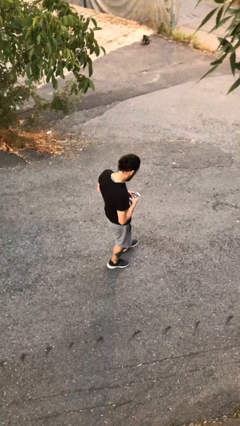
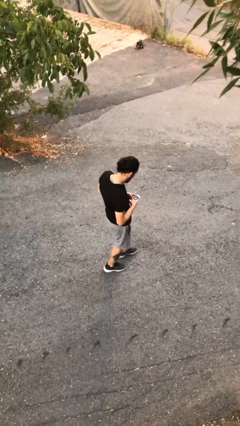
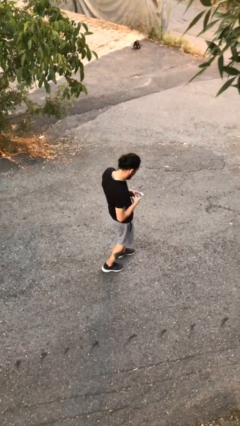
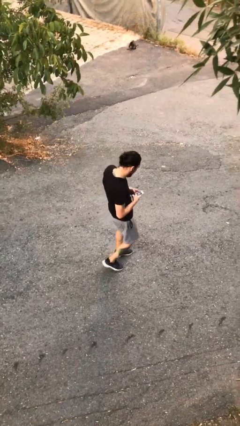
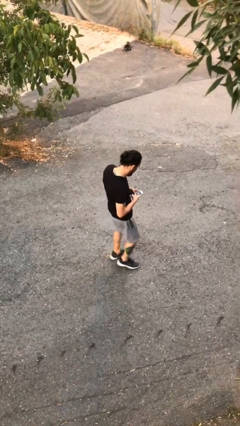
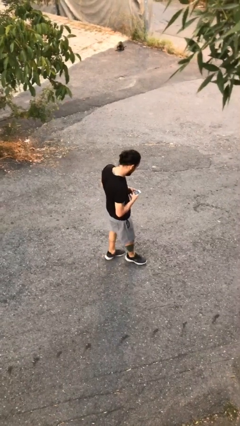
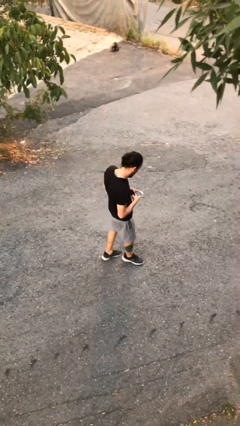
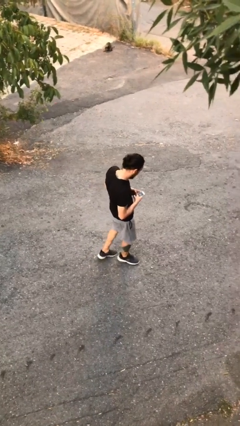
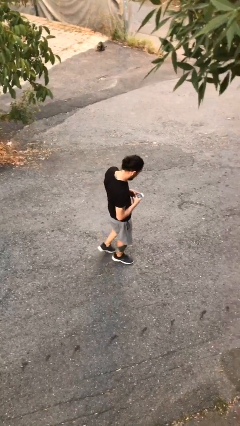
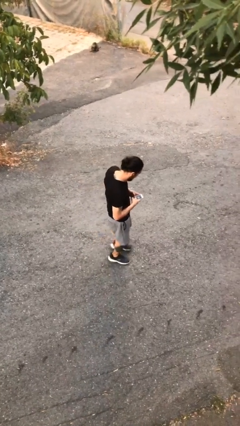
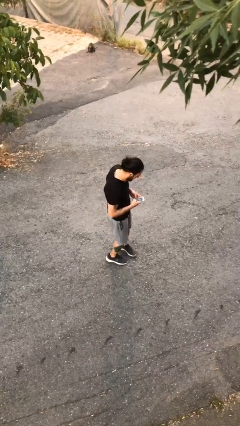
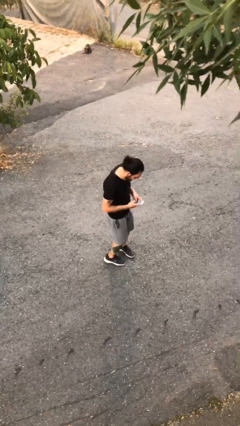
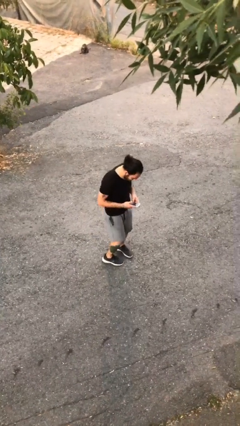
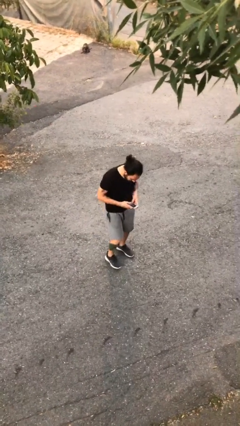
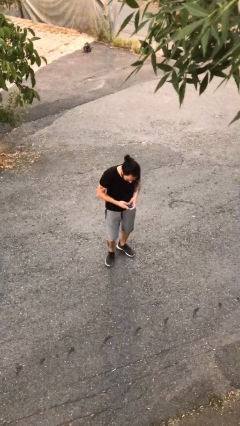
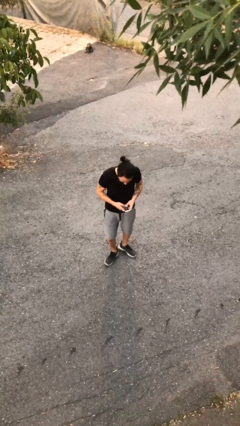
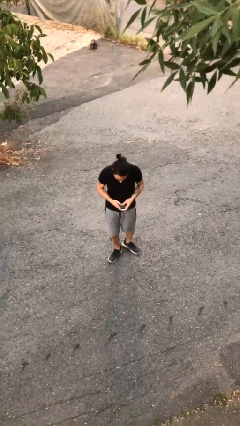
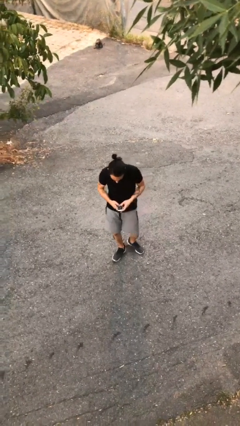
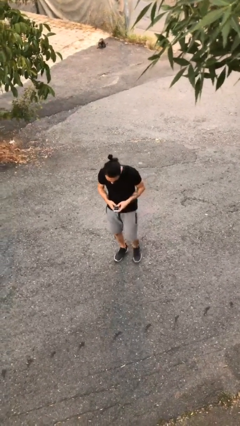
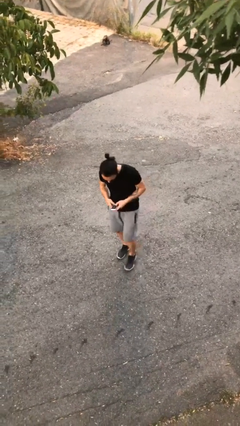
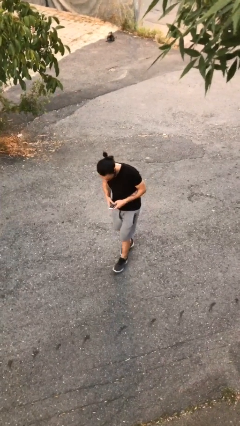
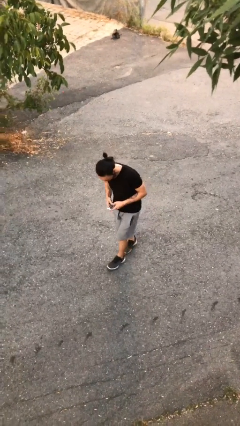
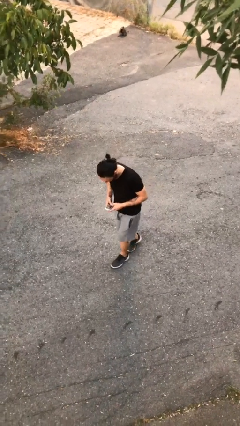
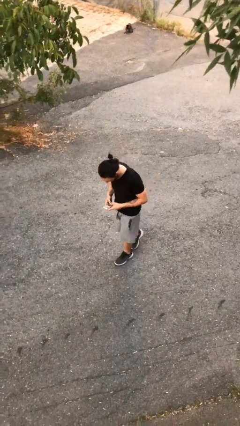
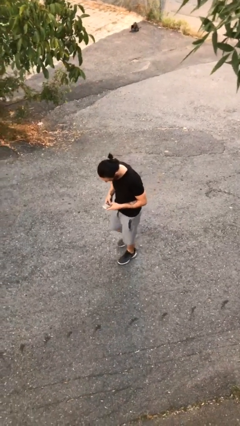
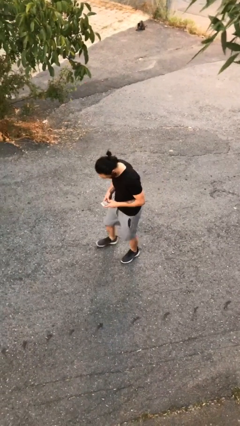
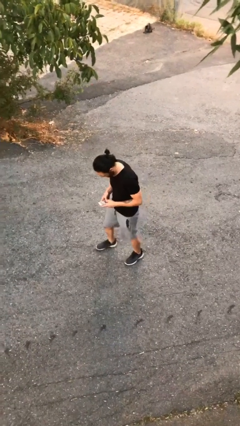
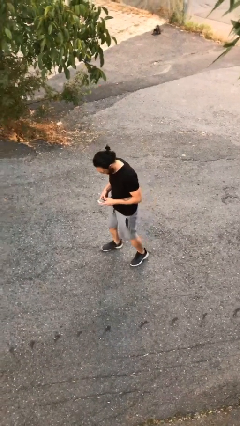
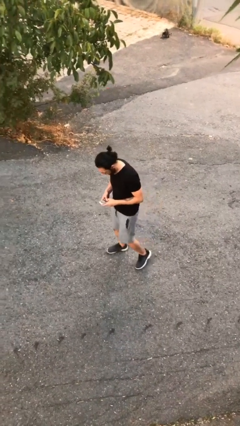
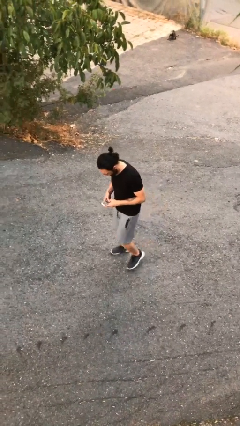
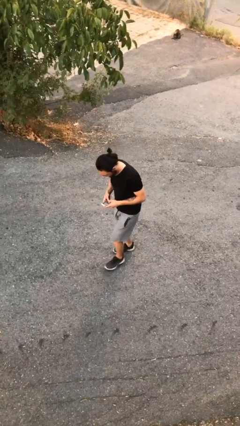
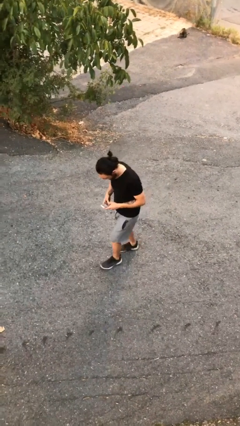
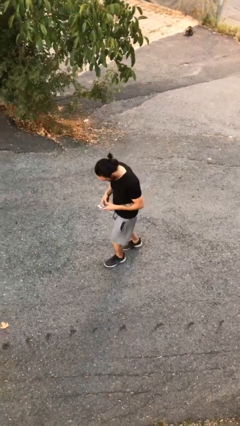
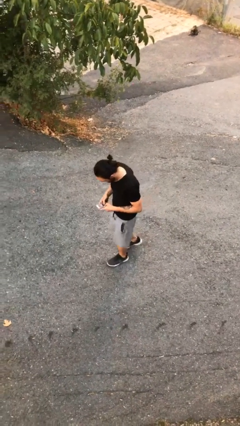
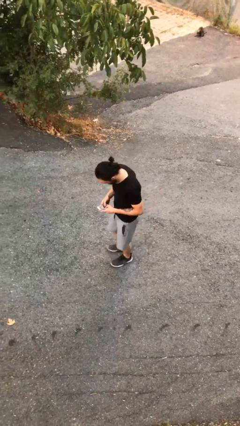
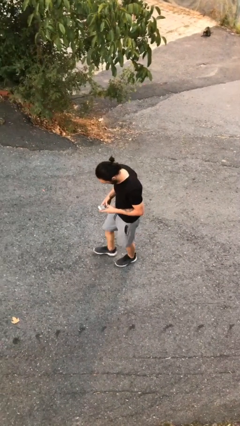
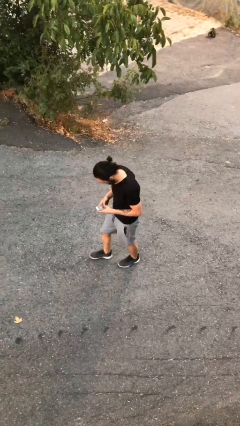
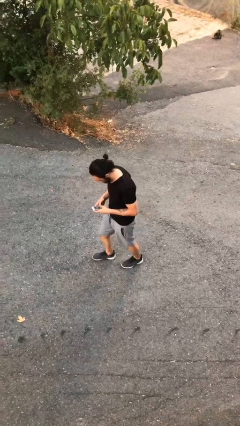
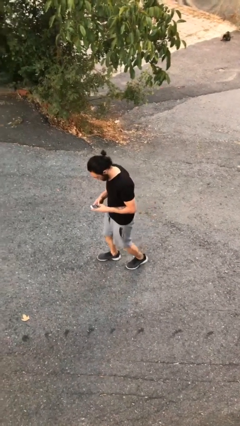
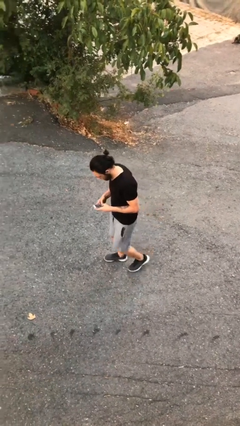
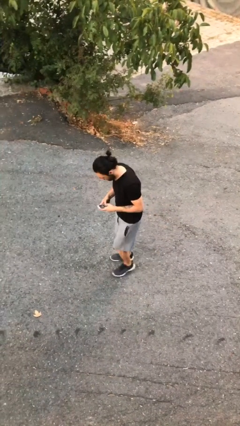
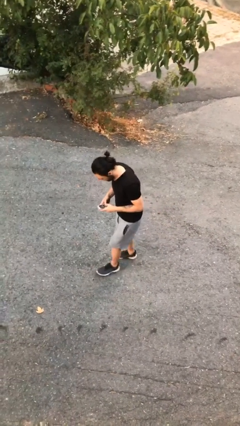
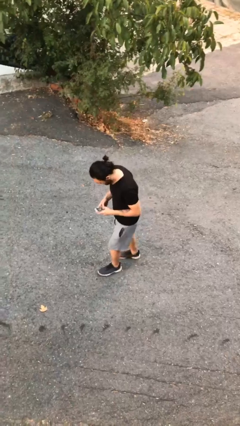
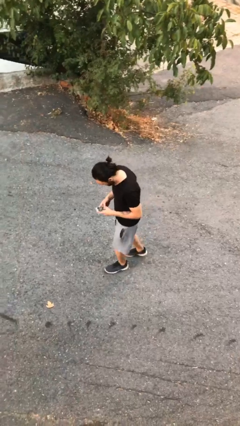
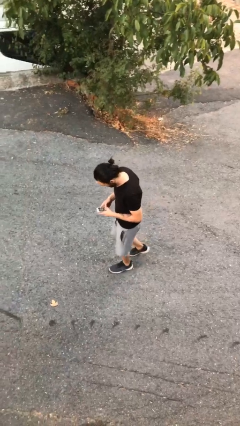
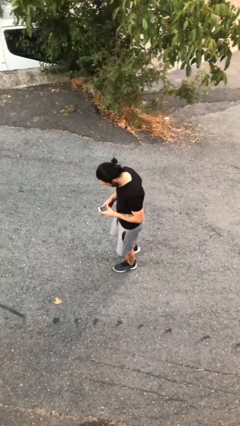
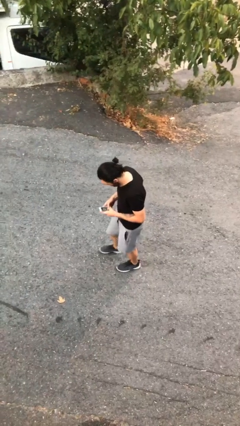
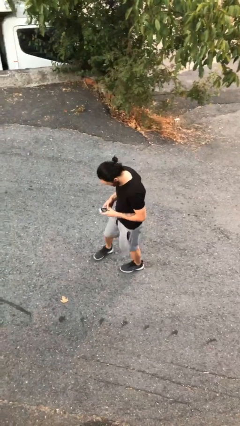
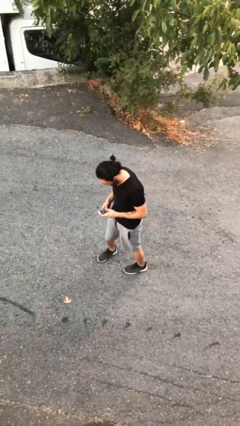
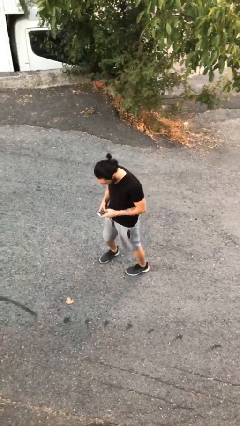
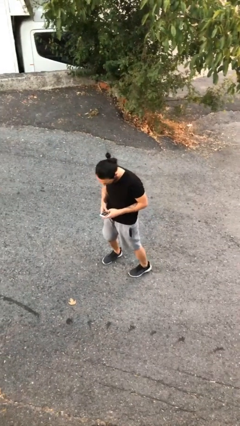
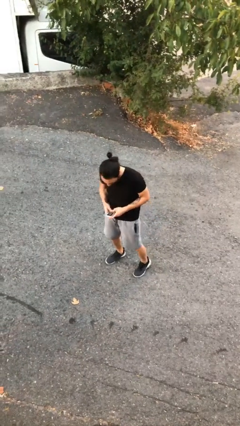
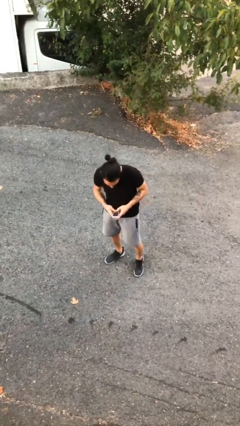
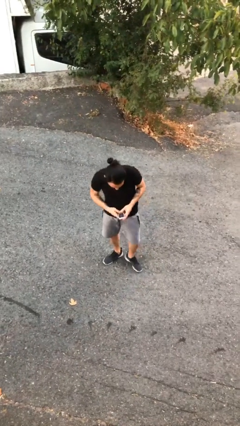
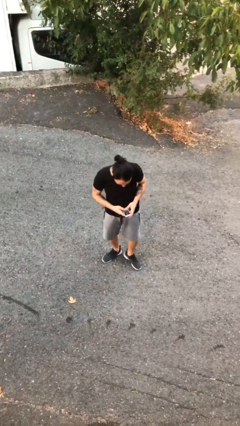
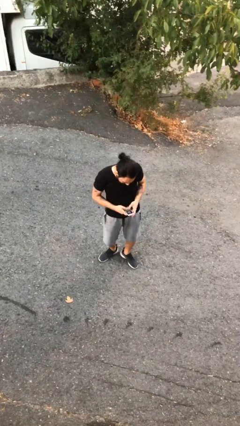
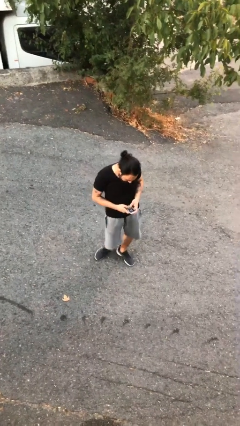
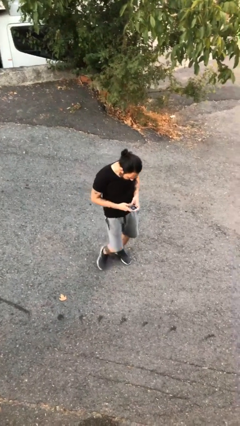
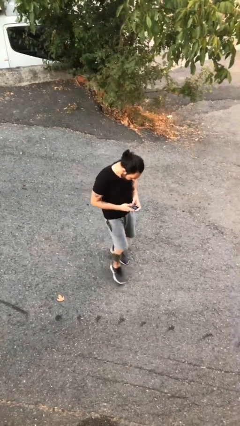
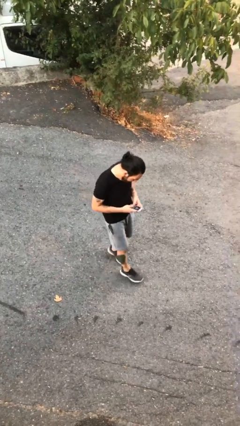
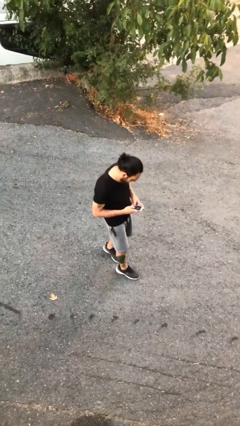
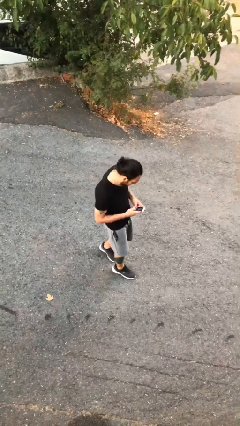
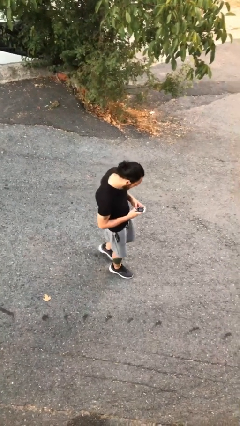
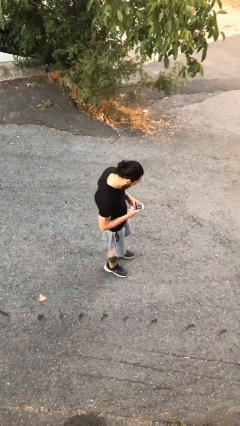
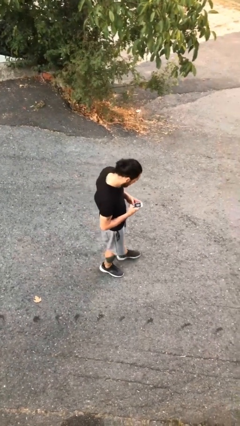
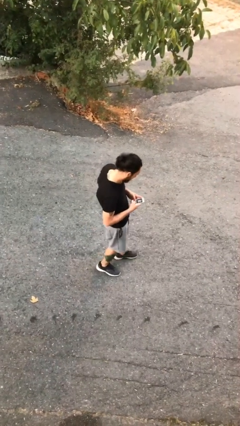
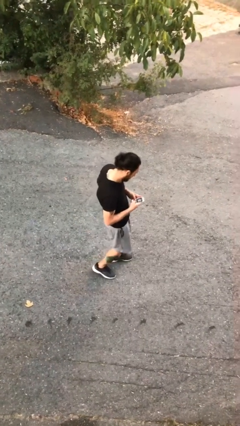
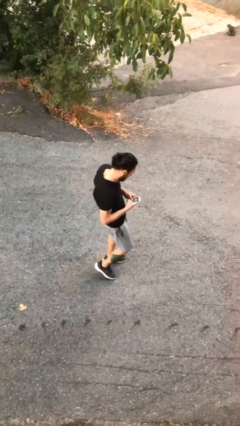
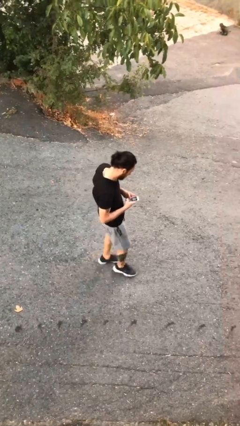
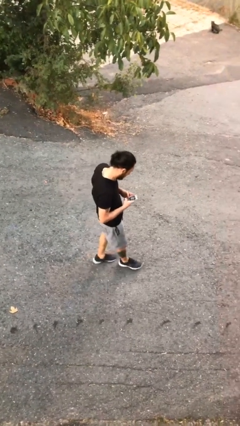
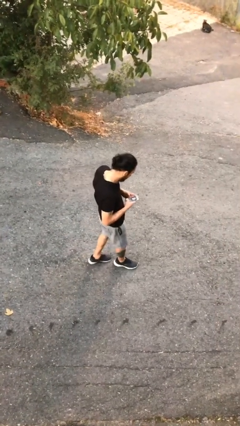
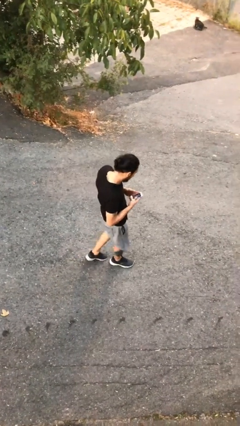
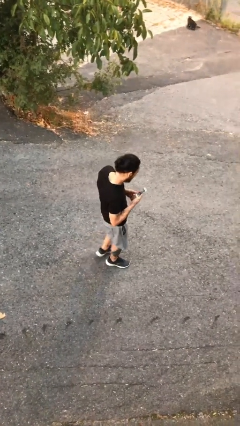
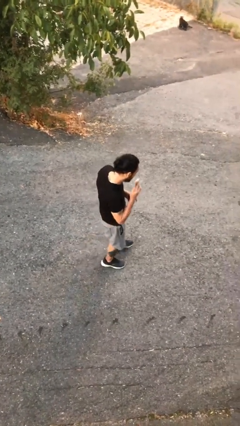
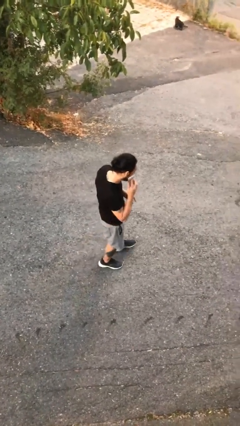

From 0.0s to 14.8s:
person texts on phone

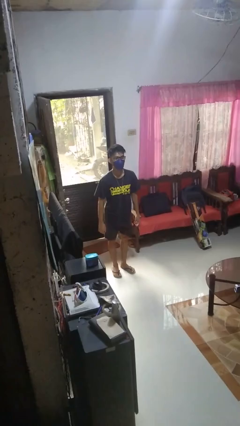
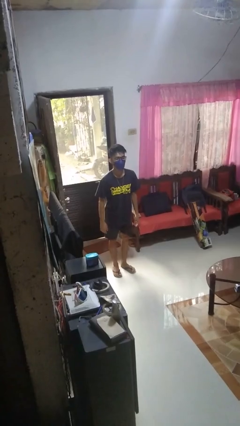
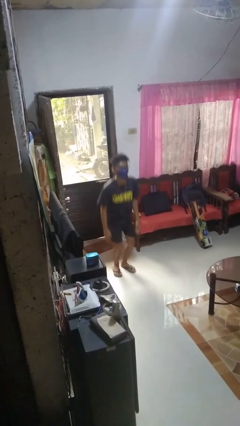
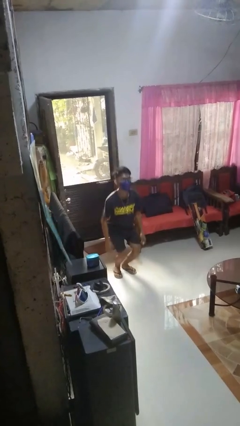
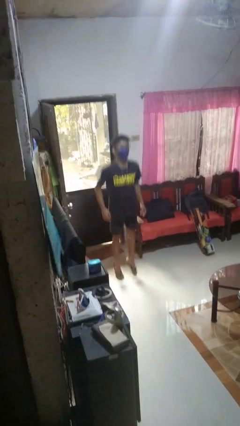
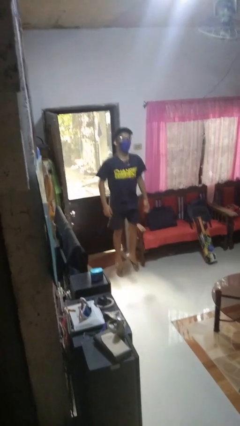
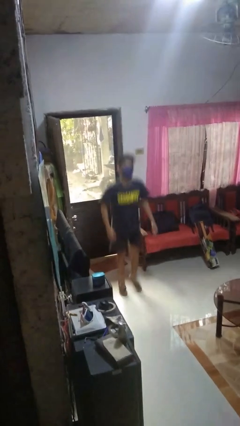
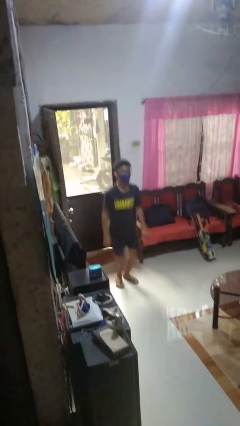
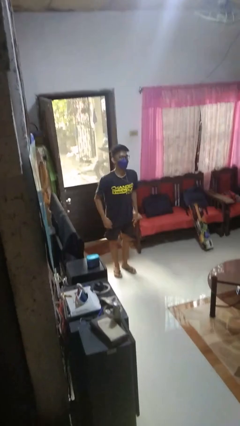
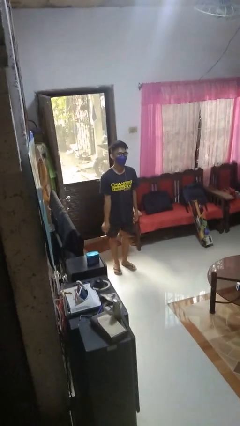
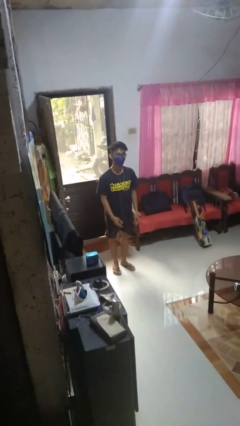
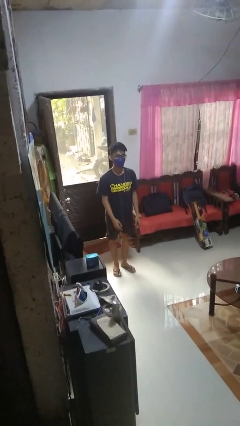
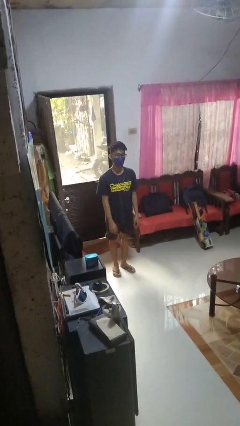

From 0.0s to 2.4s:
person jumps

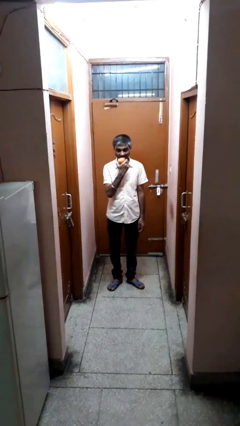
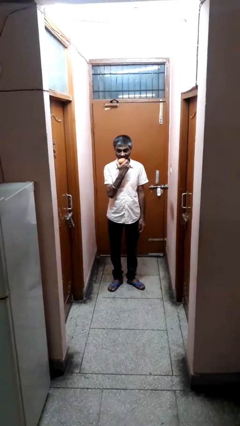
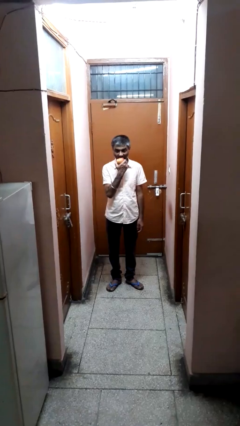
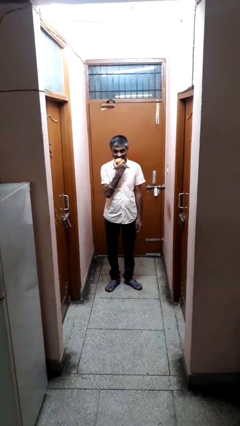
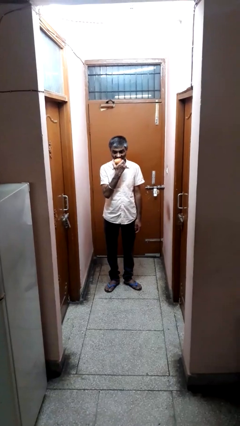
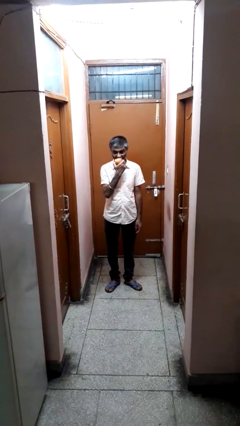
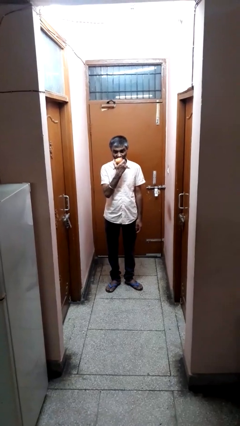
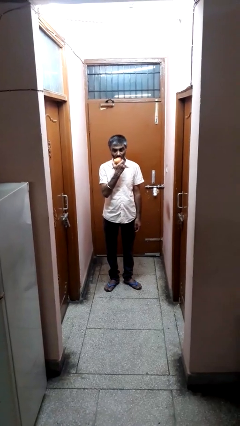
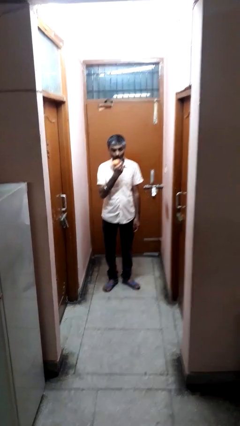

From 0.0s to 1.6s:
person eats apple
